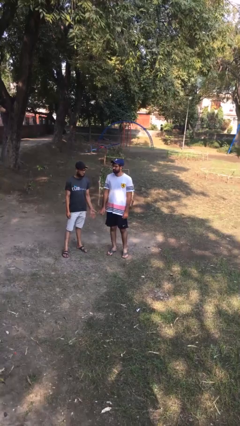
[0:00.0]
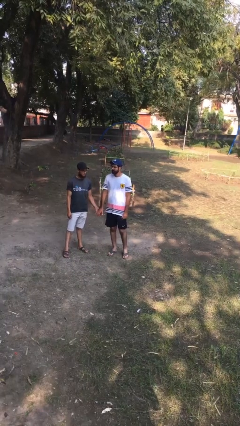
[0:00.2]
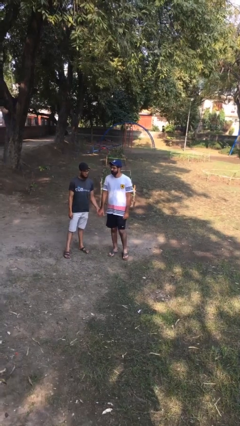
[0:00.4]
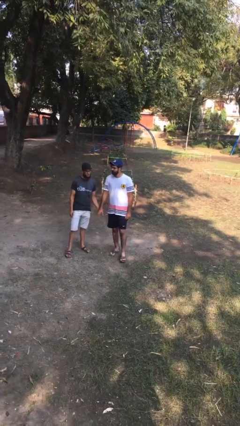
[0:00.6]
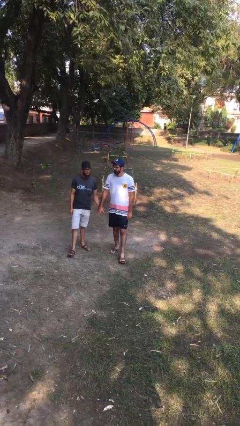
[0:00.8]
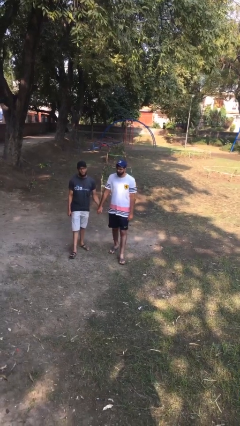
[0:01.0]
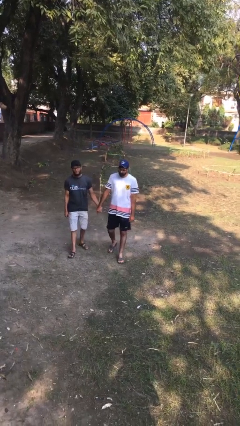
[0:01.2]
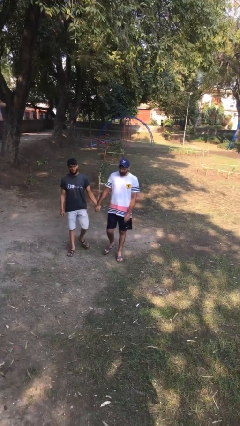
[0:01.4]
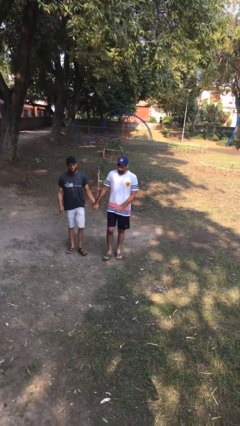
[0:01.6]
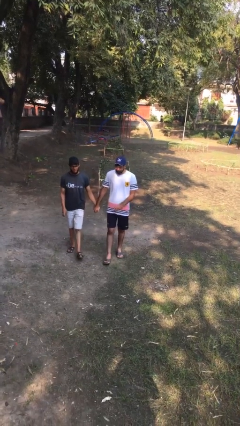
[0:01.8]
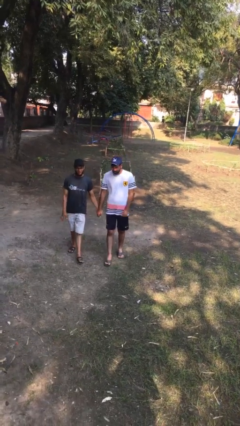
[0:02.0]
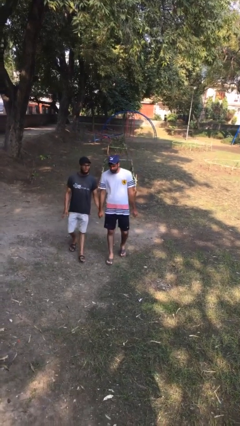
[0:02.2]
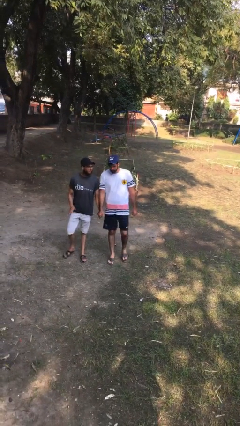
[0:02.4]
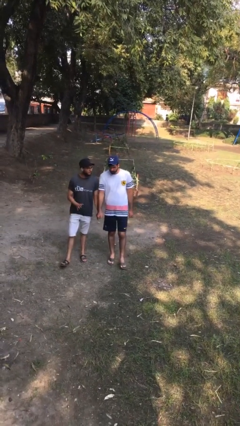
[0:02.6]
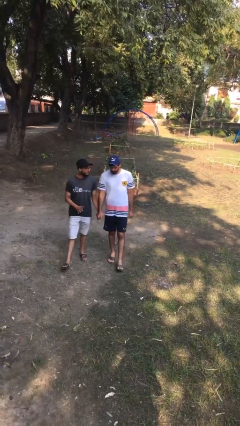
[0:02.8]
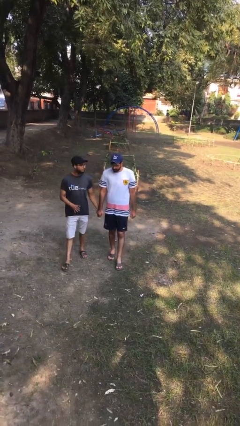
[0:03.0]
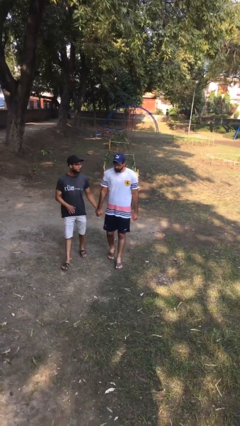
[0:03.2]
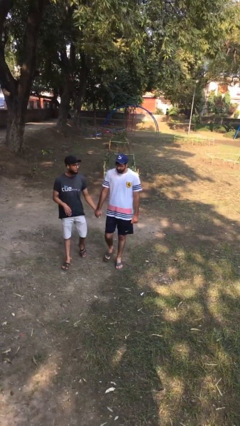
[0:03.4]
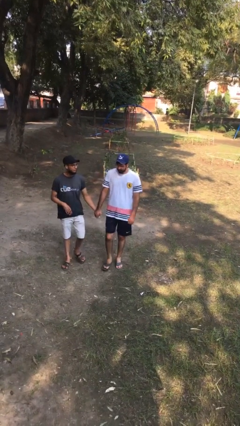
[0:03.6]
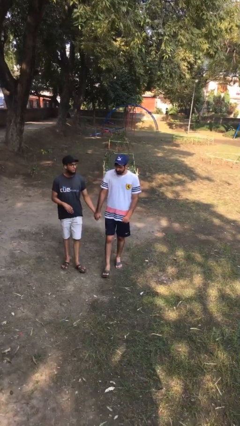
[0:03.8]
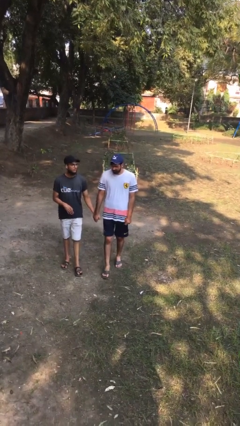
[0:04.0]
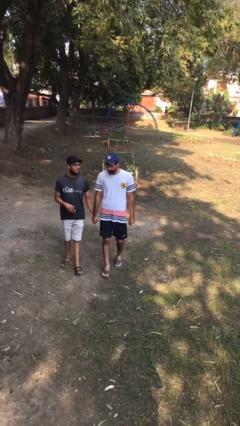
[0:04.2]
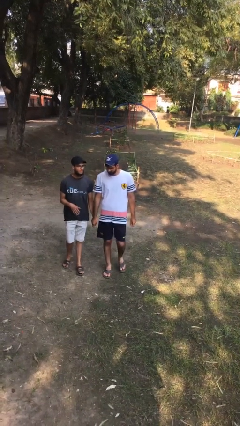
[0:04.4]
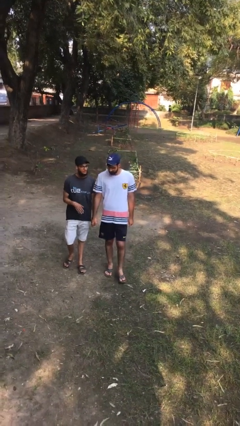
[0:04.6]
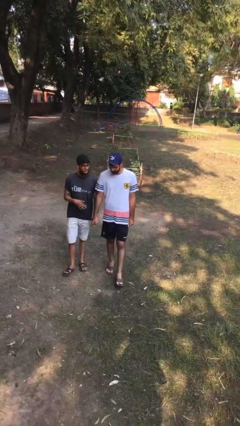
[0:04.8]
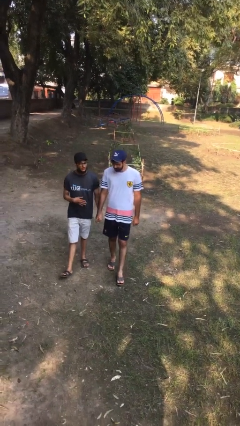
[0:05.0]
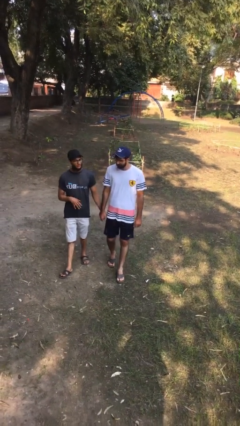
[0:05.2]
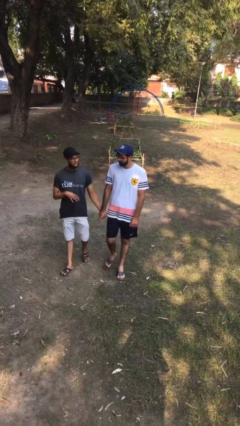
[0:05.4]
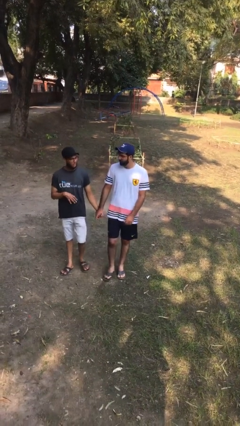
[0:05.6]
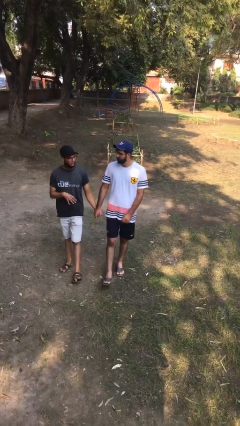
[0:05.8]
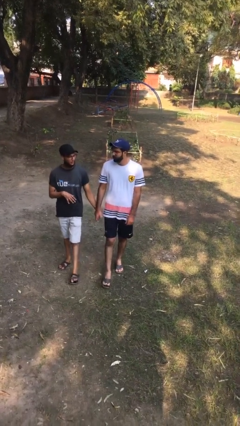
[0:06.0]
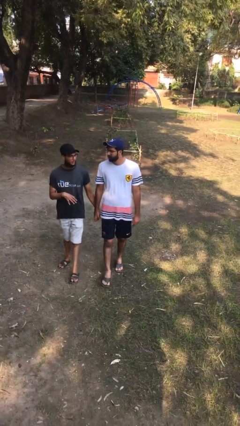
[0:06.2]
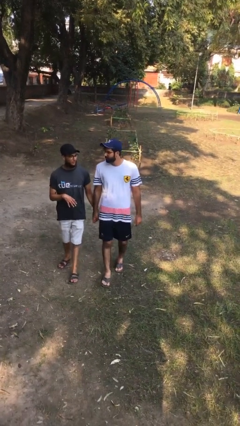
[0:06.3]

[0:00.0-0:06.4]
person holds hand

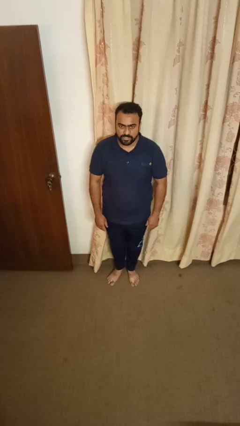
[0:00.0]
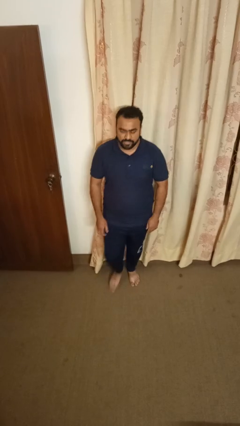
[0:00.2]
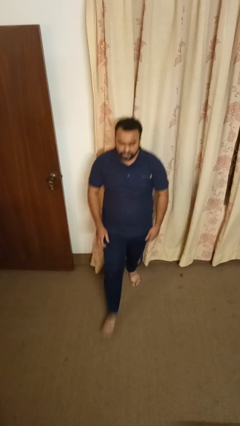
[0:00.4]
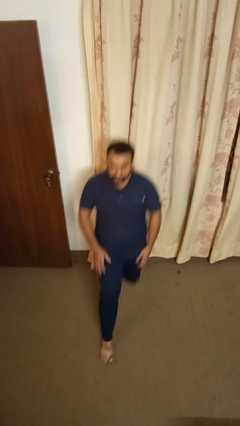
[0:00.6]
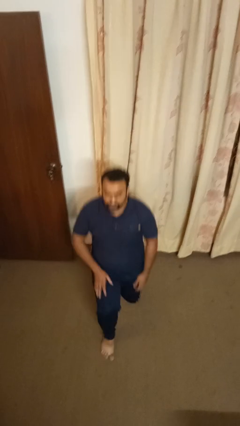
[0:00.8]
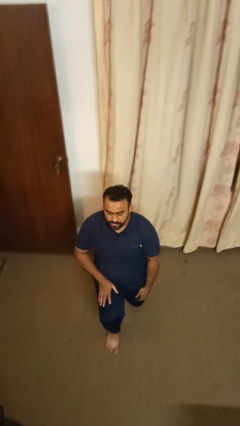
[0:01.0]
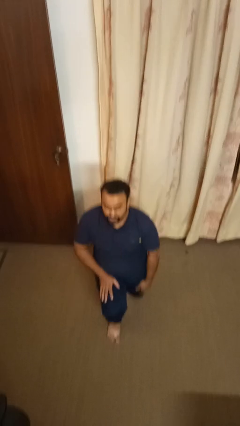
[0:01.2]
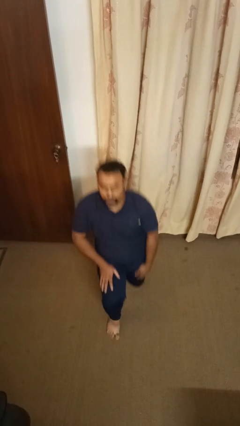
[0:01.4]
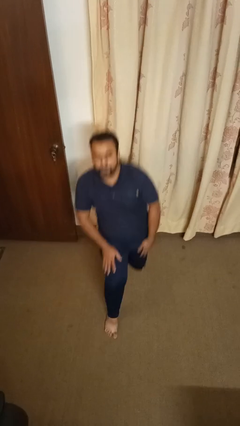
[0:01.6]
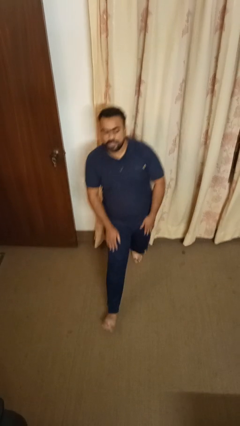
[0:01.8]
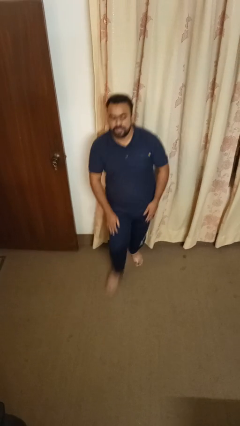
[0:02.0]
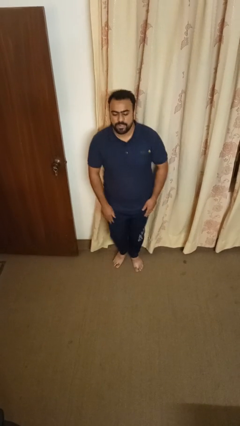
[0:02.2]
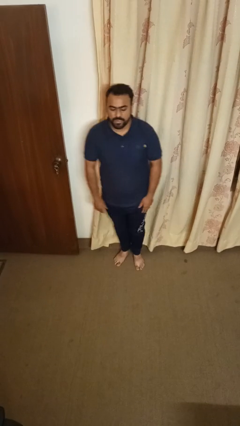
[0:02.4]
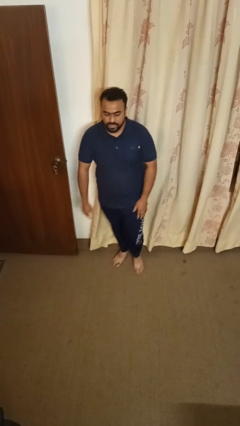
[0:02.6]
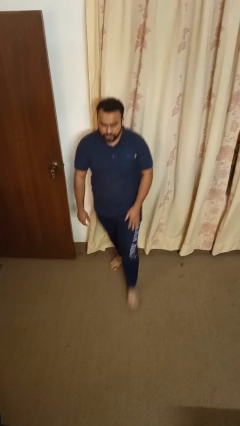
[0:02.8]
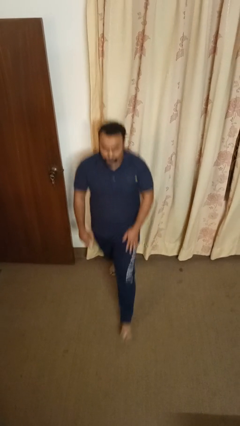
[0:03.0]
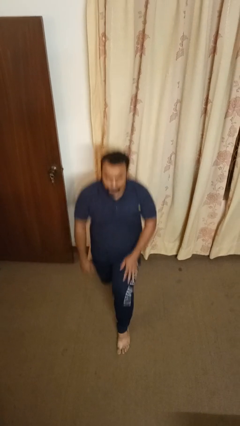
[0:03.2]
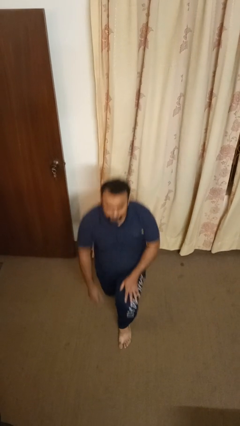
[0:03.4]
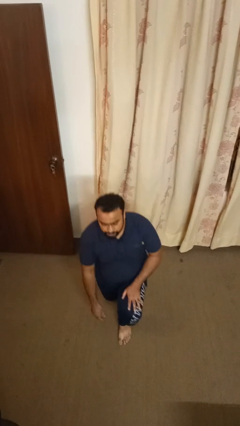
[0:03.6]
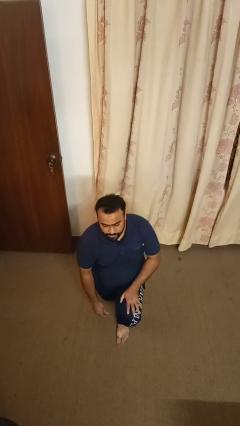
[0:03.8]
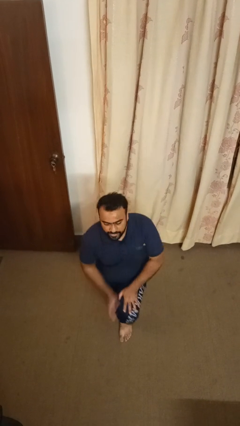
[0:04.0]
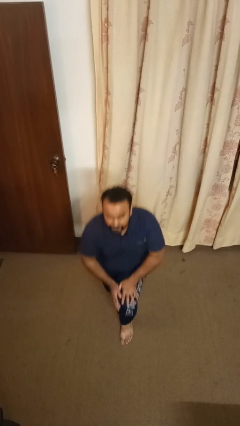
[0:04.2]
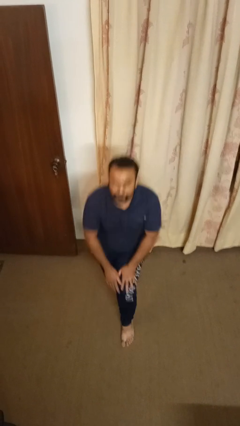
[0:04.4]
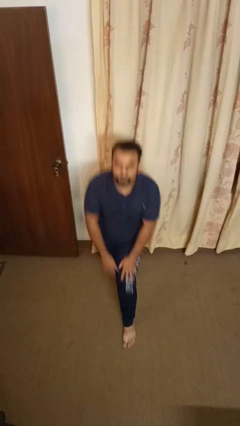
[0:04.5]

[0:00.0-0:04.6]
person exercises with lunges

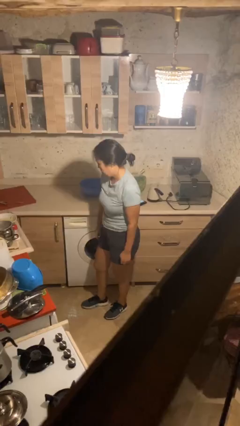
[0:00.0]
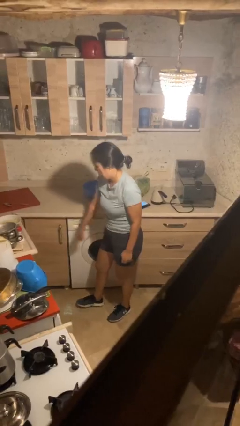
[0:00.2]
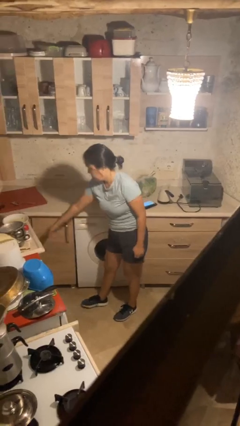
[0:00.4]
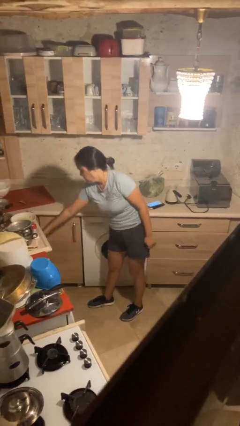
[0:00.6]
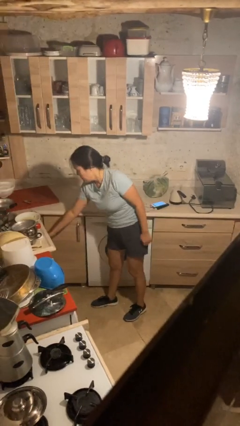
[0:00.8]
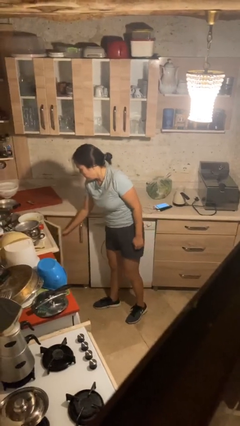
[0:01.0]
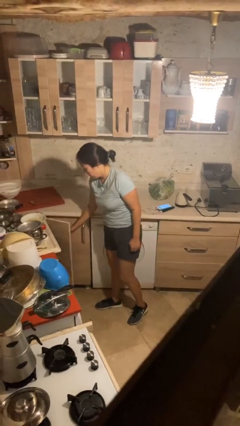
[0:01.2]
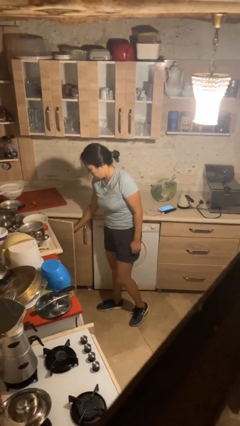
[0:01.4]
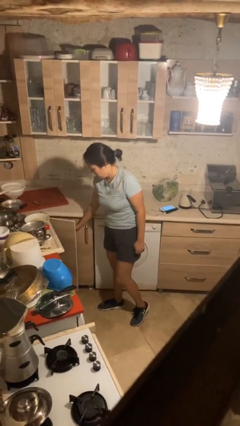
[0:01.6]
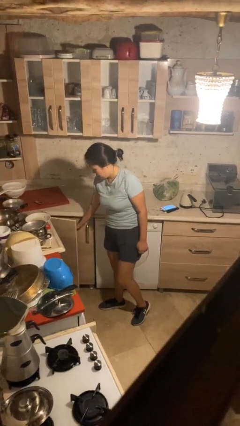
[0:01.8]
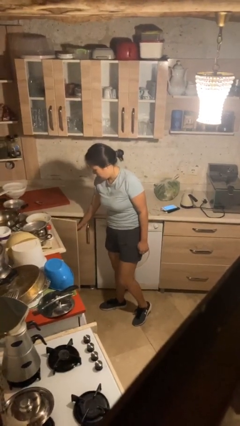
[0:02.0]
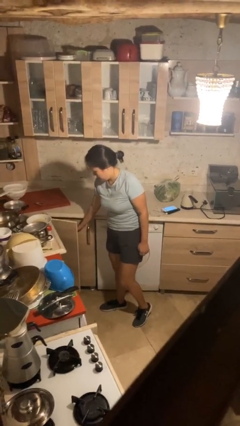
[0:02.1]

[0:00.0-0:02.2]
person closes cabinet

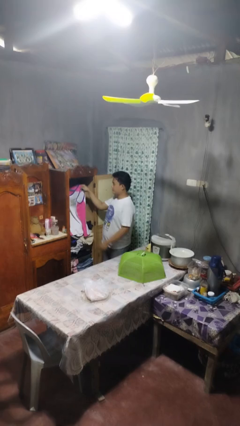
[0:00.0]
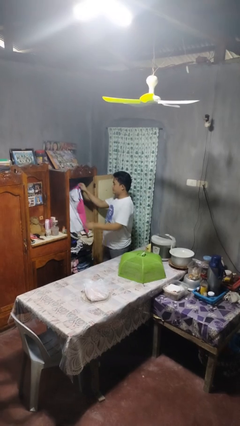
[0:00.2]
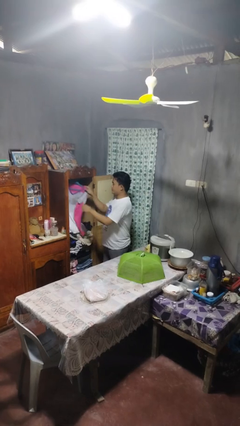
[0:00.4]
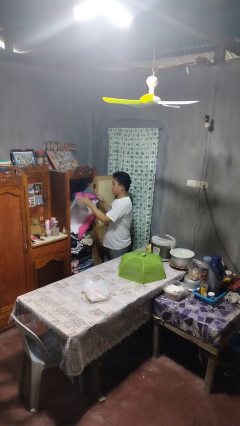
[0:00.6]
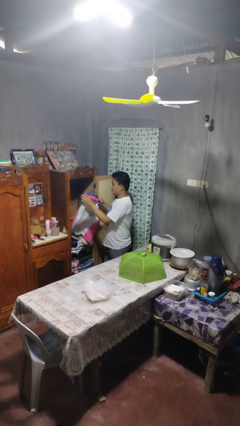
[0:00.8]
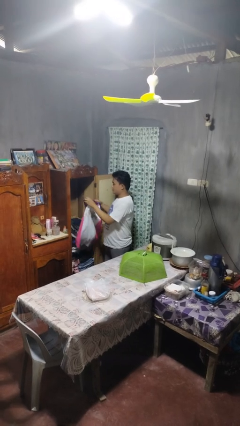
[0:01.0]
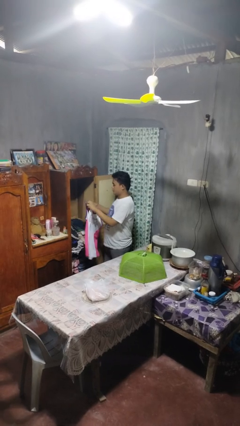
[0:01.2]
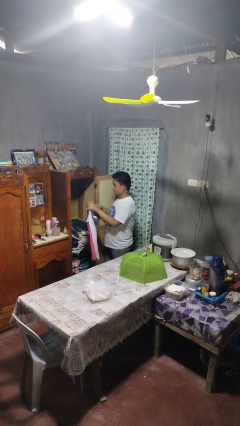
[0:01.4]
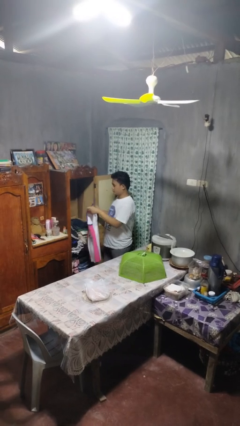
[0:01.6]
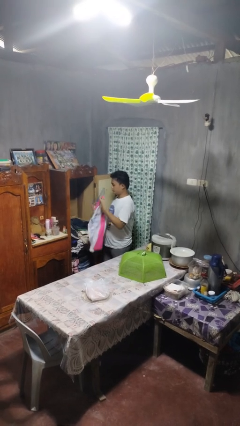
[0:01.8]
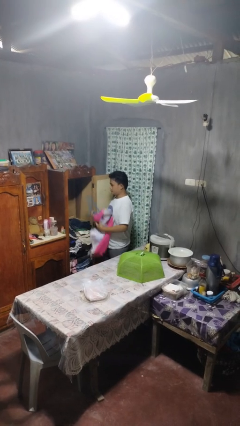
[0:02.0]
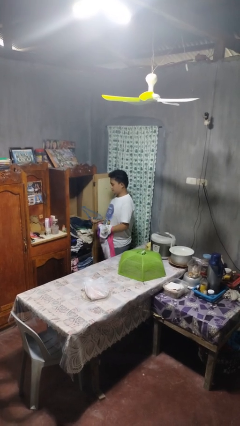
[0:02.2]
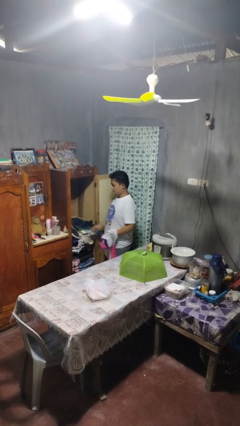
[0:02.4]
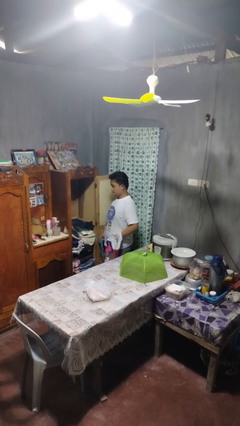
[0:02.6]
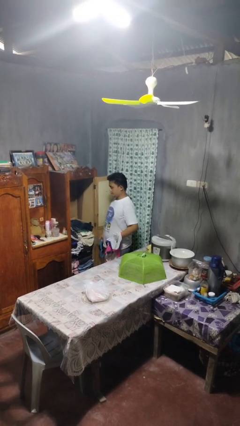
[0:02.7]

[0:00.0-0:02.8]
person takes clothes from closet

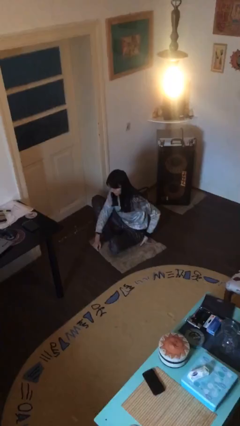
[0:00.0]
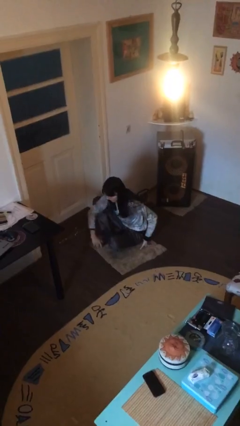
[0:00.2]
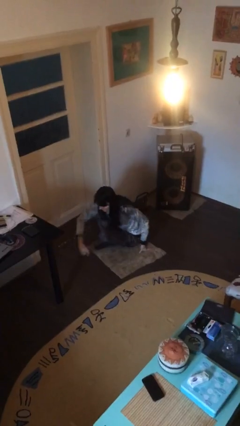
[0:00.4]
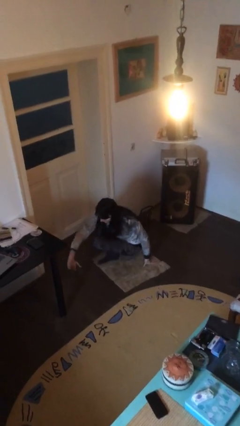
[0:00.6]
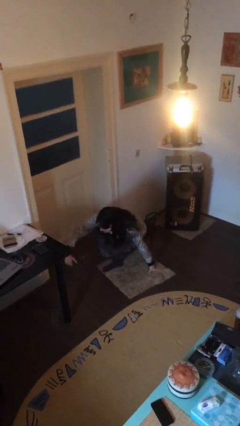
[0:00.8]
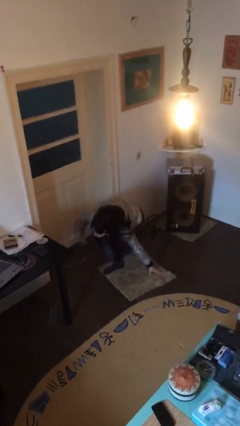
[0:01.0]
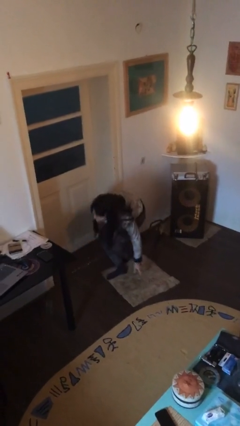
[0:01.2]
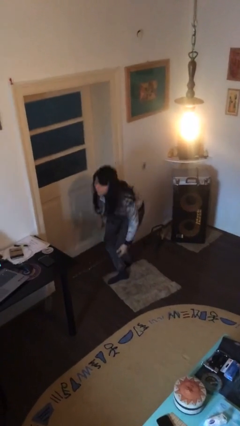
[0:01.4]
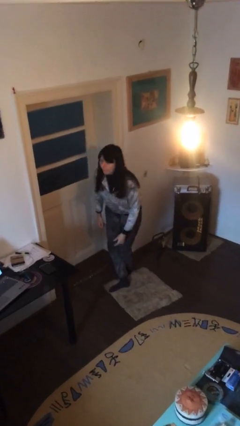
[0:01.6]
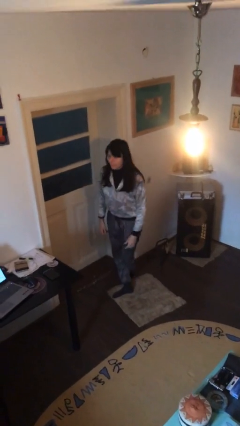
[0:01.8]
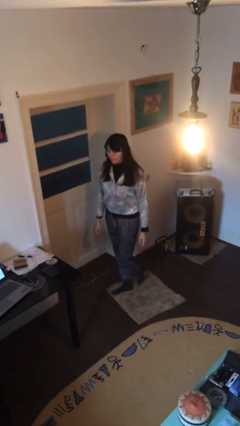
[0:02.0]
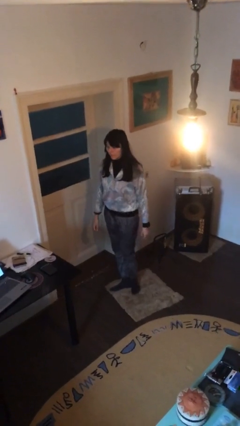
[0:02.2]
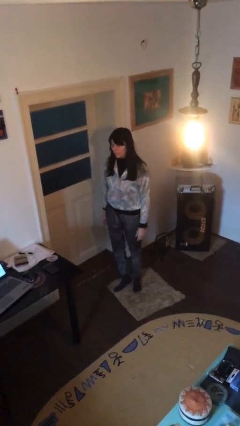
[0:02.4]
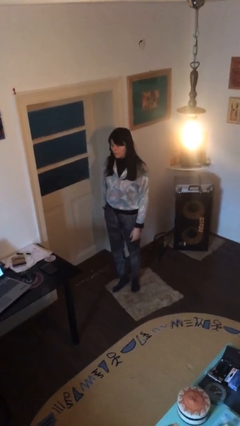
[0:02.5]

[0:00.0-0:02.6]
person stands up
